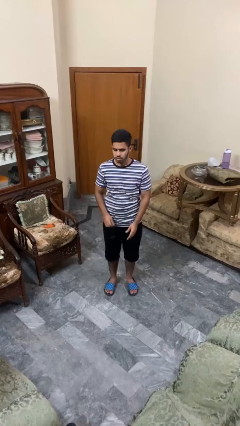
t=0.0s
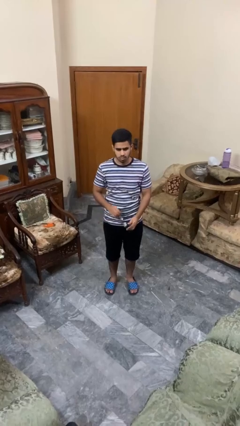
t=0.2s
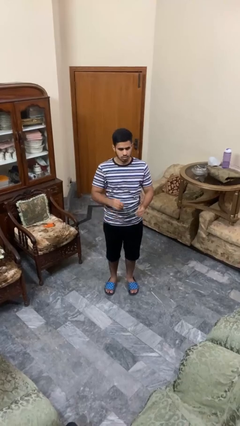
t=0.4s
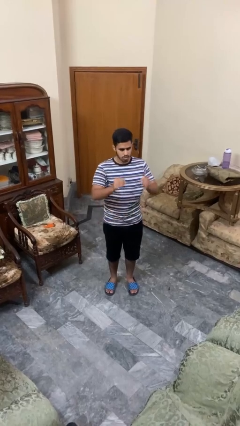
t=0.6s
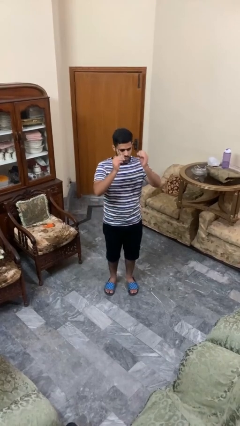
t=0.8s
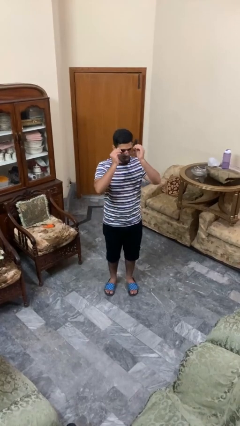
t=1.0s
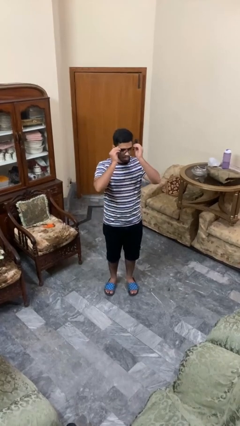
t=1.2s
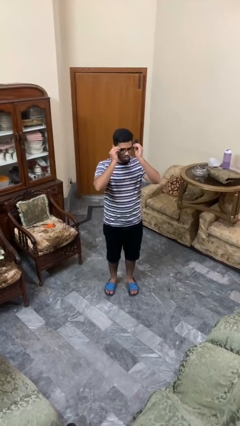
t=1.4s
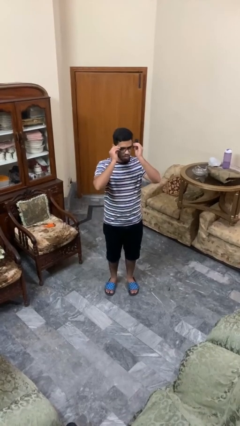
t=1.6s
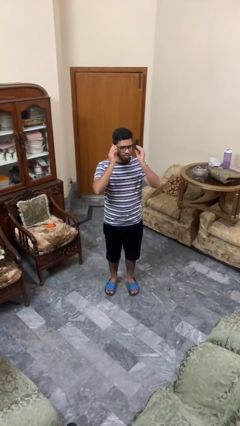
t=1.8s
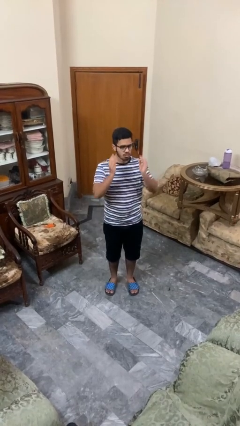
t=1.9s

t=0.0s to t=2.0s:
person puts on glasses

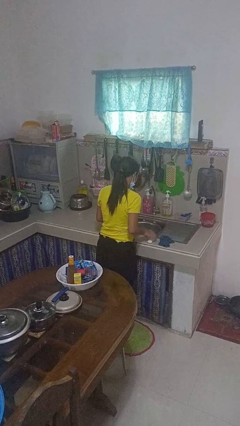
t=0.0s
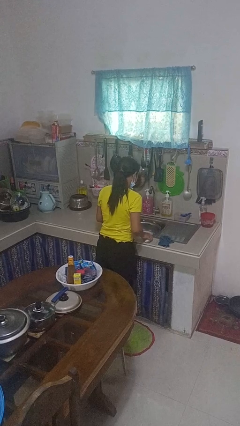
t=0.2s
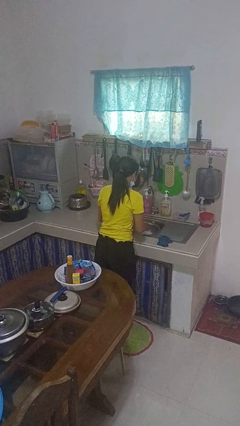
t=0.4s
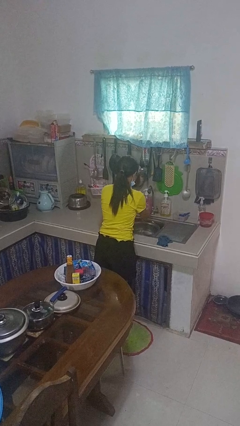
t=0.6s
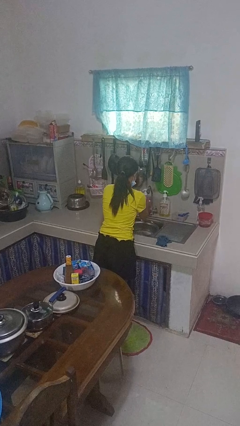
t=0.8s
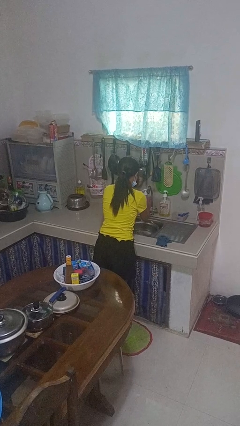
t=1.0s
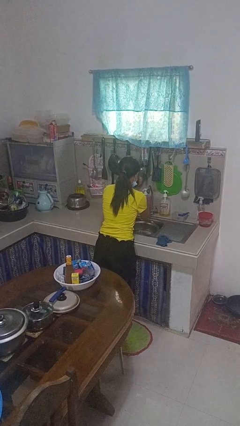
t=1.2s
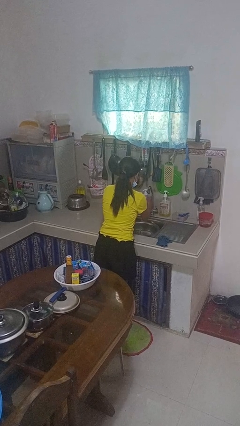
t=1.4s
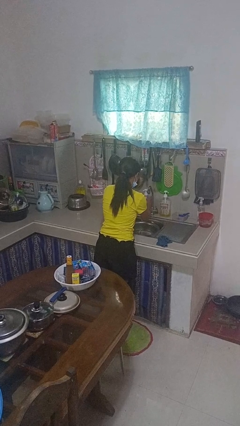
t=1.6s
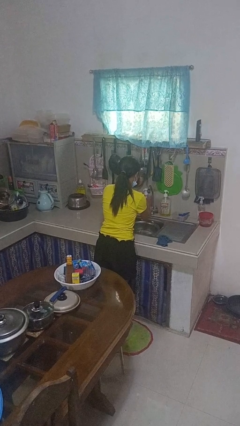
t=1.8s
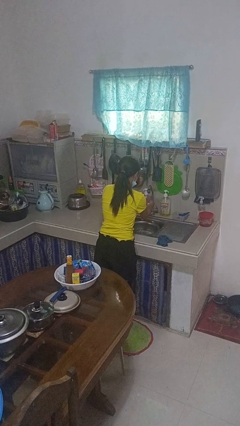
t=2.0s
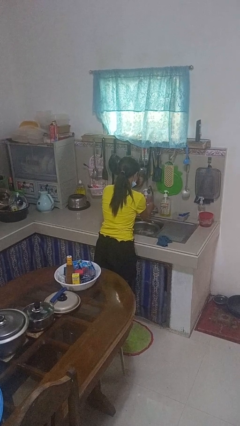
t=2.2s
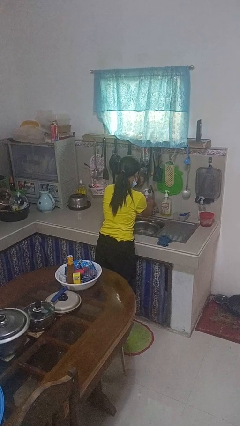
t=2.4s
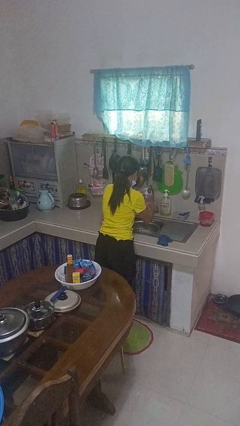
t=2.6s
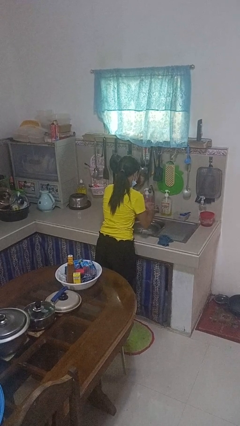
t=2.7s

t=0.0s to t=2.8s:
person washes hands

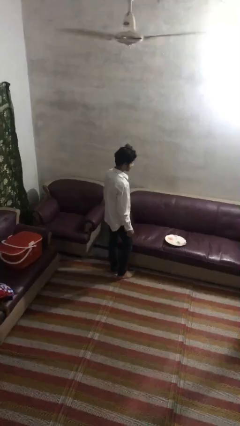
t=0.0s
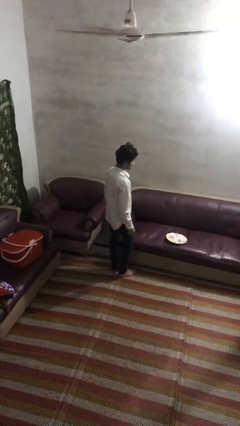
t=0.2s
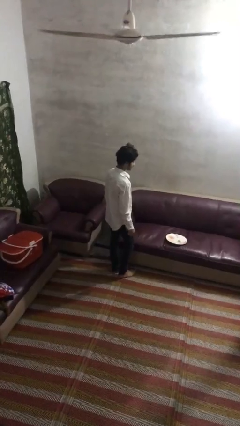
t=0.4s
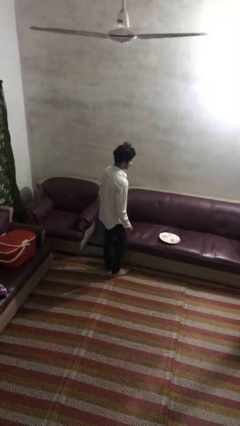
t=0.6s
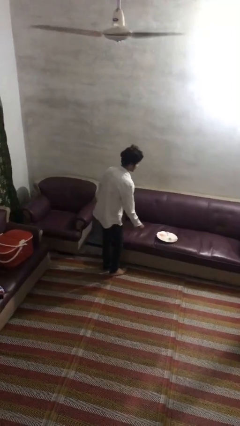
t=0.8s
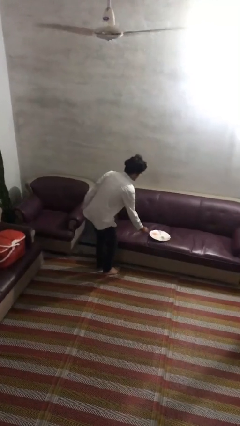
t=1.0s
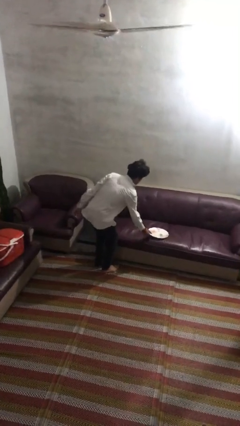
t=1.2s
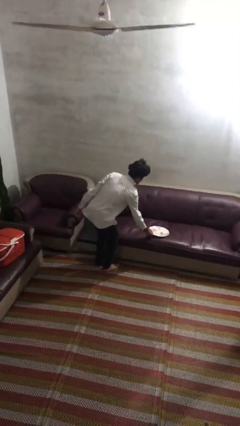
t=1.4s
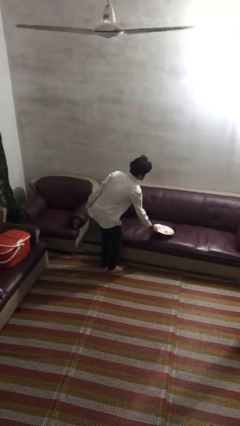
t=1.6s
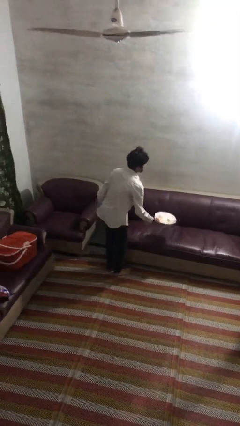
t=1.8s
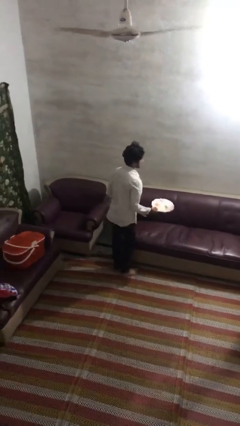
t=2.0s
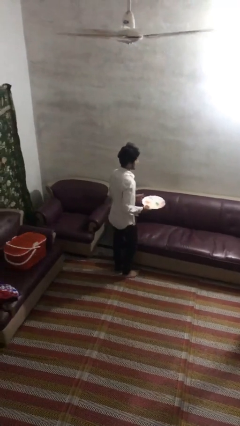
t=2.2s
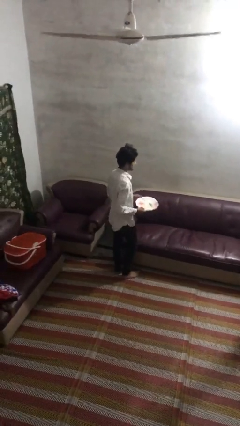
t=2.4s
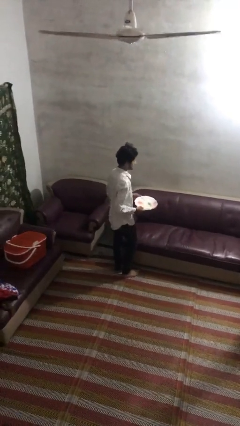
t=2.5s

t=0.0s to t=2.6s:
person picks up object from couch

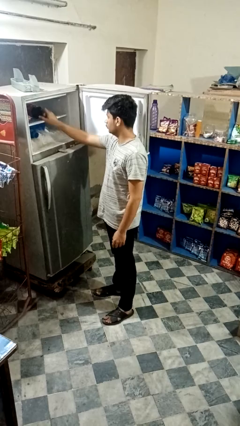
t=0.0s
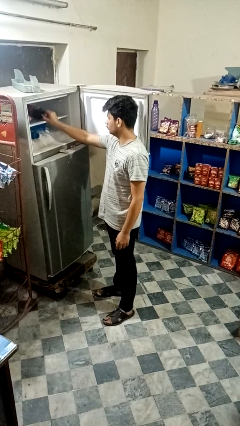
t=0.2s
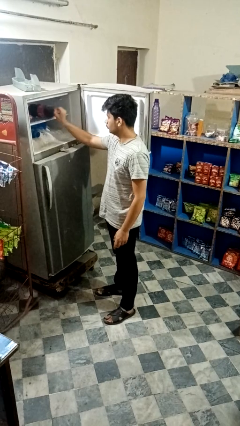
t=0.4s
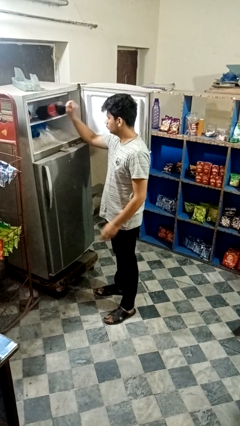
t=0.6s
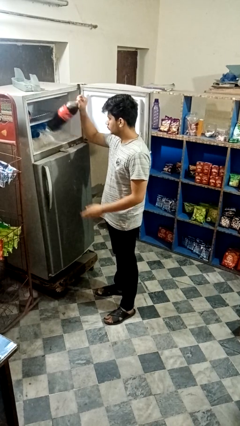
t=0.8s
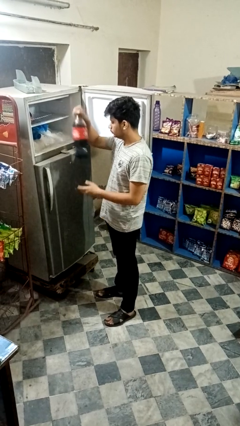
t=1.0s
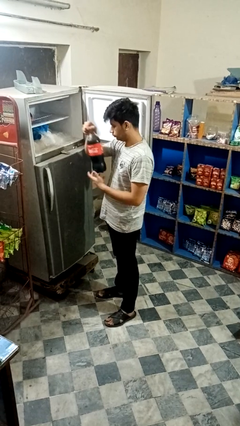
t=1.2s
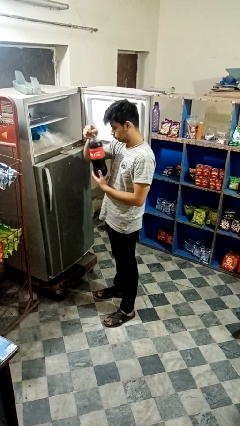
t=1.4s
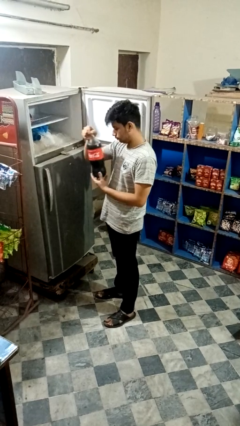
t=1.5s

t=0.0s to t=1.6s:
person takes object from refrigerator

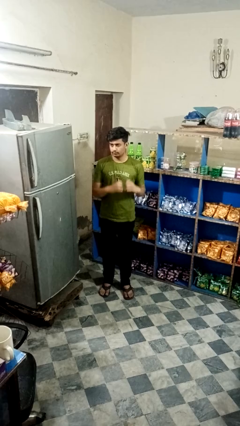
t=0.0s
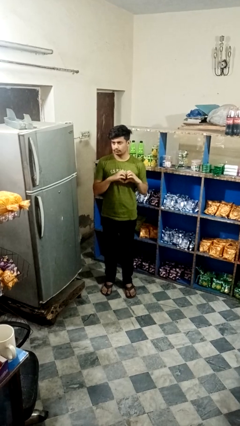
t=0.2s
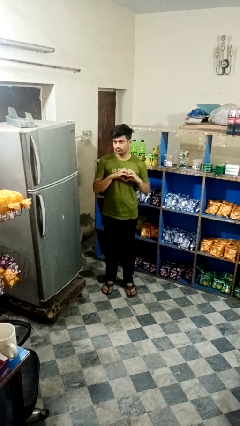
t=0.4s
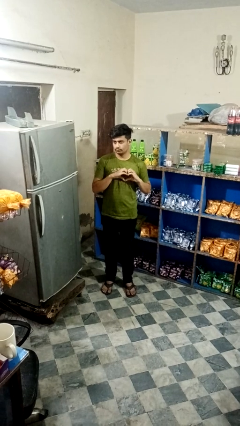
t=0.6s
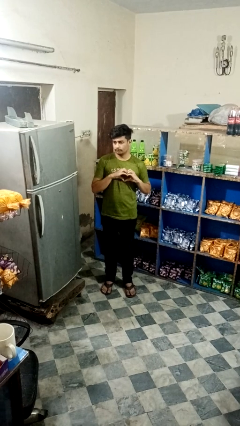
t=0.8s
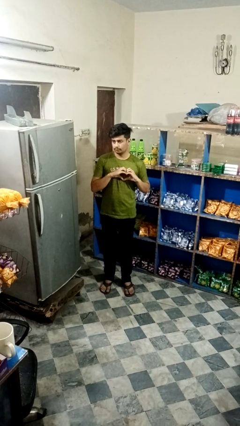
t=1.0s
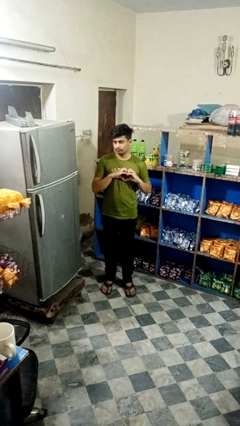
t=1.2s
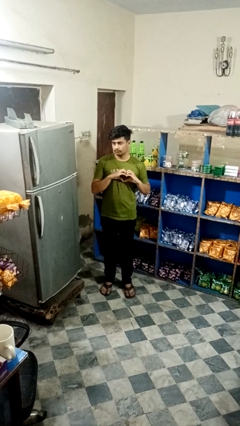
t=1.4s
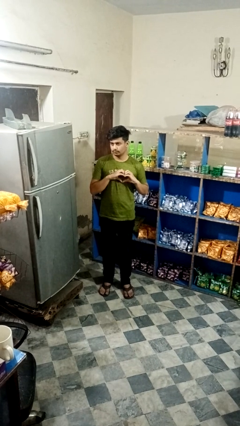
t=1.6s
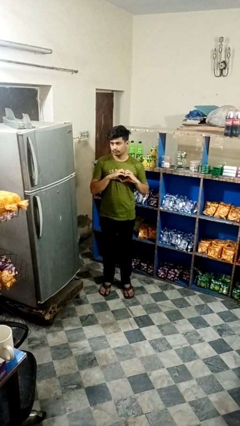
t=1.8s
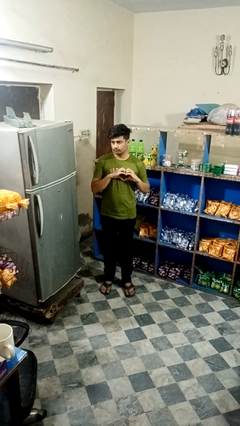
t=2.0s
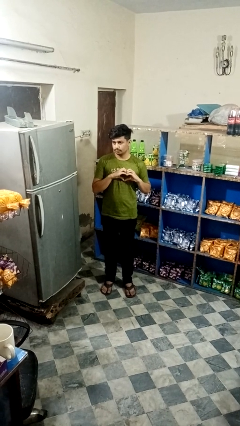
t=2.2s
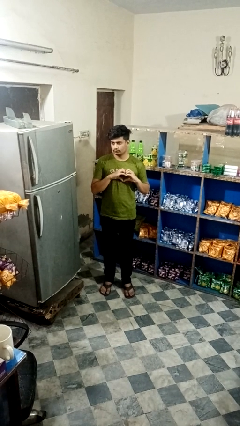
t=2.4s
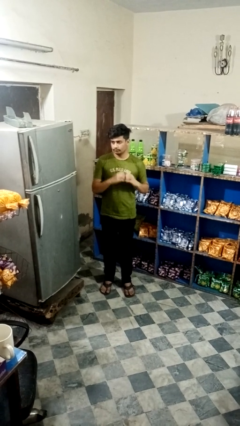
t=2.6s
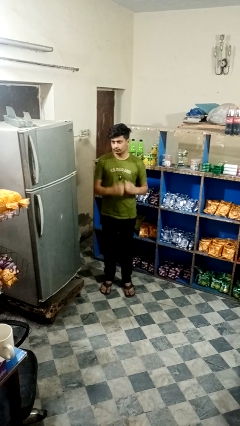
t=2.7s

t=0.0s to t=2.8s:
person gestures heart

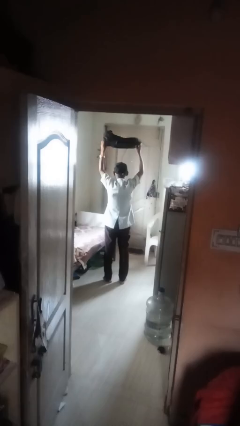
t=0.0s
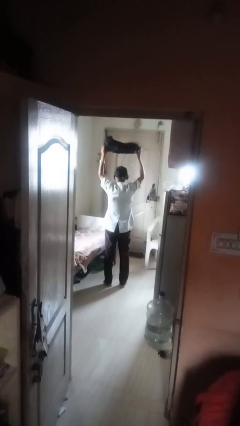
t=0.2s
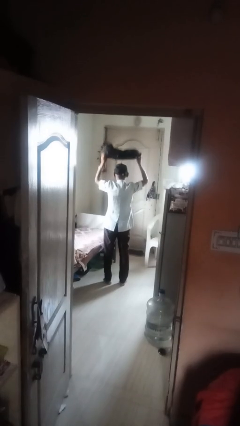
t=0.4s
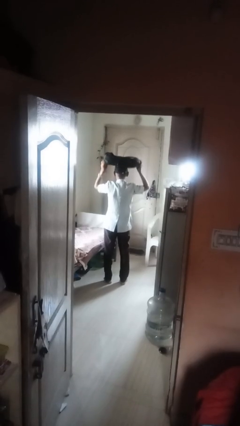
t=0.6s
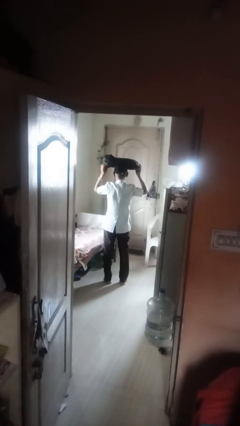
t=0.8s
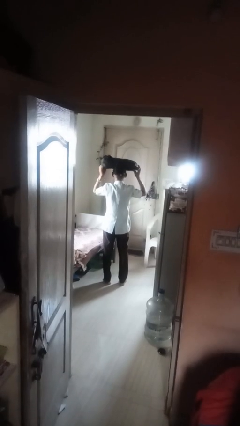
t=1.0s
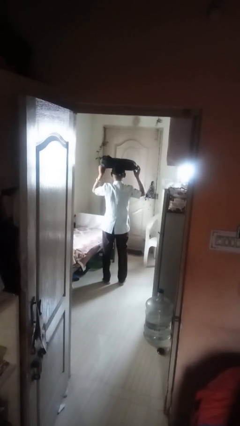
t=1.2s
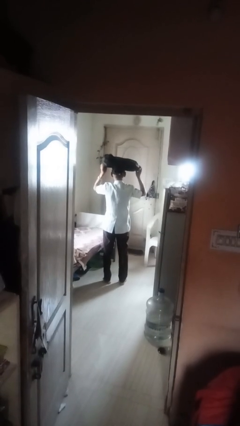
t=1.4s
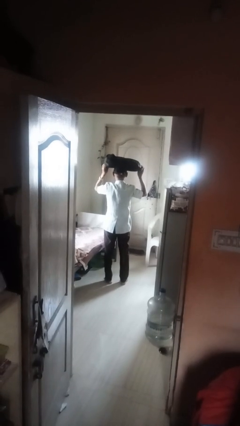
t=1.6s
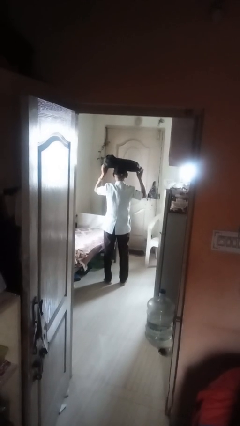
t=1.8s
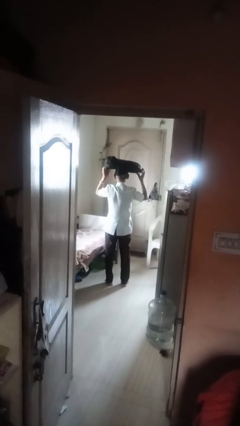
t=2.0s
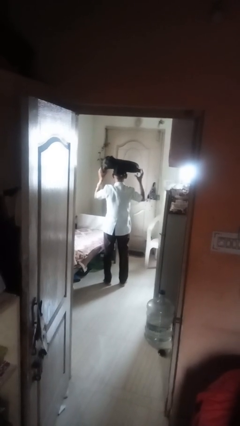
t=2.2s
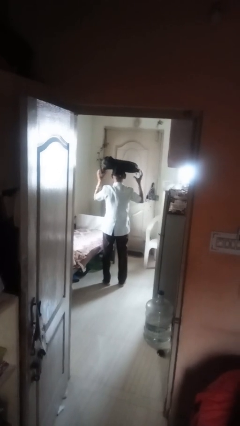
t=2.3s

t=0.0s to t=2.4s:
person holds object above head

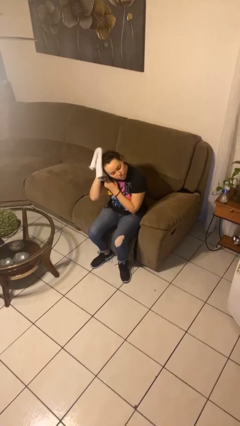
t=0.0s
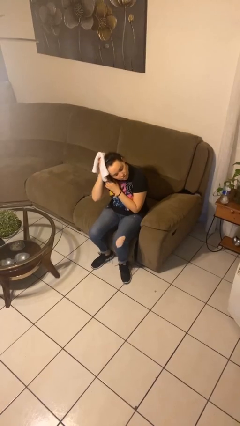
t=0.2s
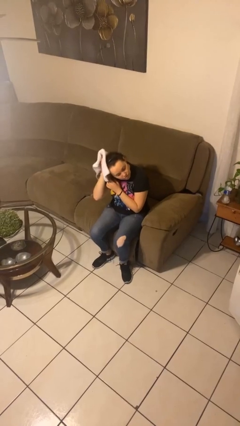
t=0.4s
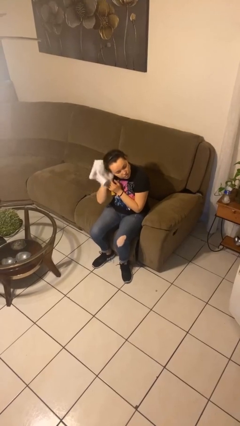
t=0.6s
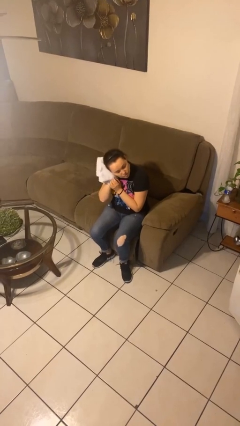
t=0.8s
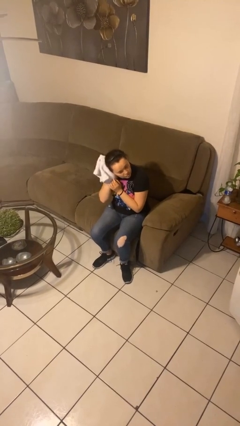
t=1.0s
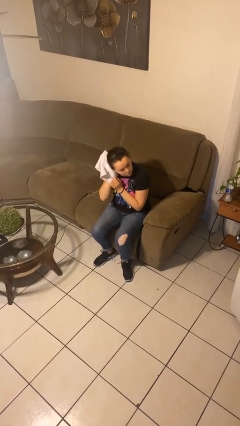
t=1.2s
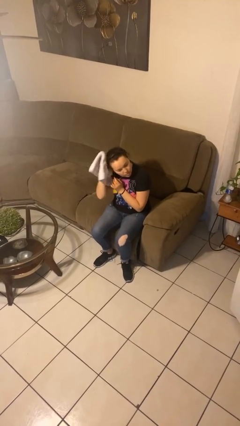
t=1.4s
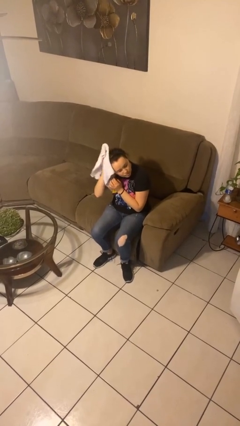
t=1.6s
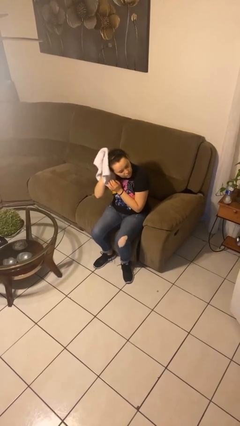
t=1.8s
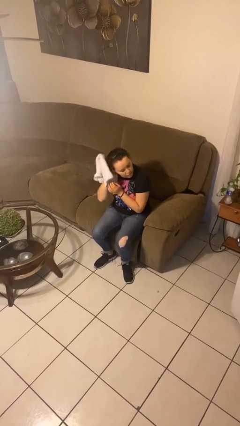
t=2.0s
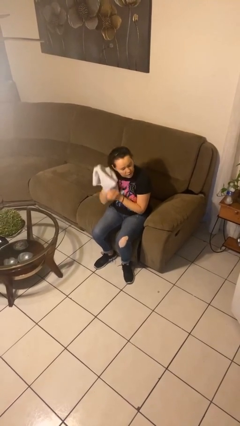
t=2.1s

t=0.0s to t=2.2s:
person dries hair with towel

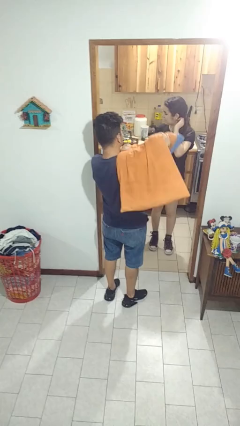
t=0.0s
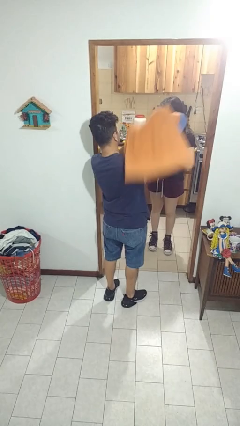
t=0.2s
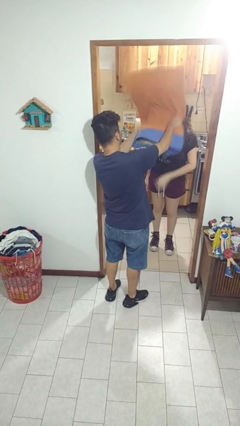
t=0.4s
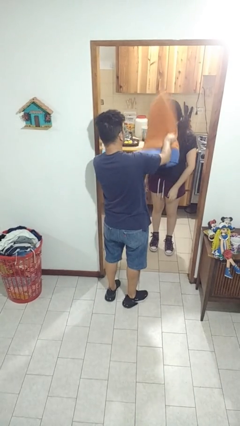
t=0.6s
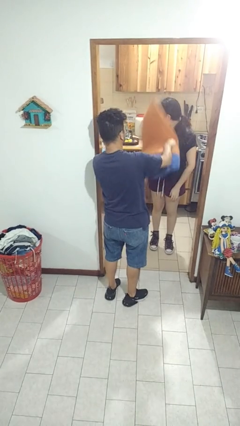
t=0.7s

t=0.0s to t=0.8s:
person hits person with pillow
